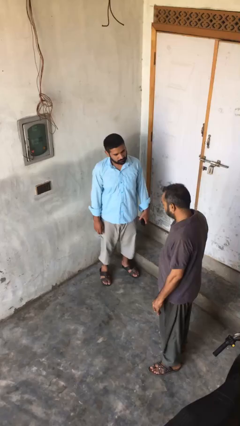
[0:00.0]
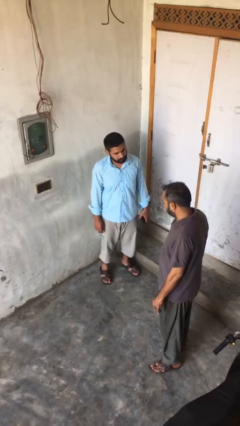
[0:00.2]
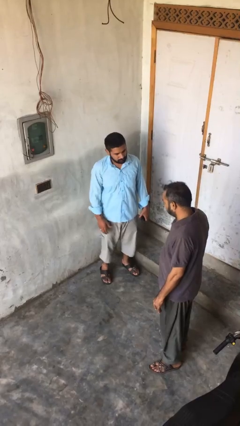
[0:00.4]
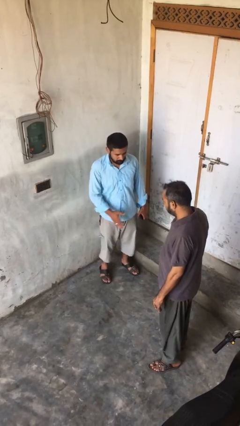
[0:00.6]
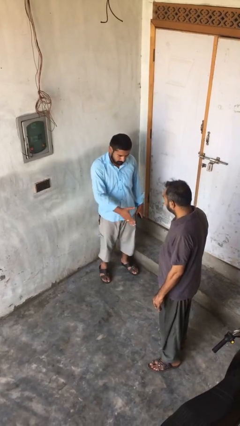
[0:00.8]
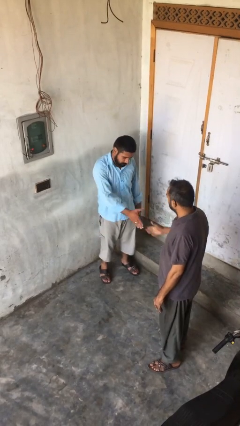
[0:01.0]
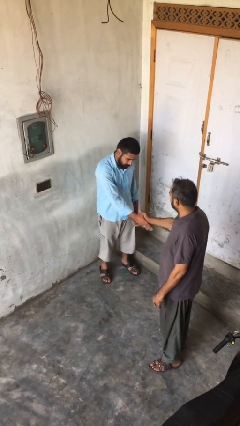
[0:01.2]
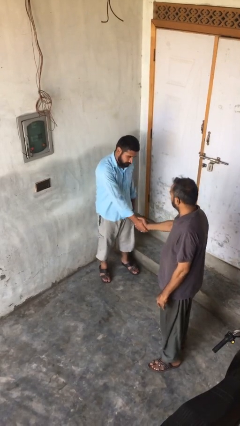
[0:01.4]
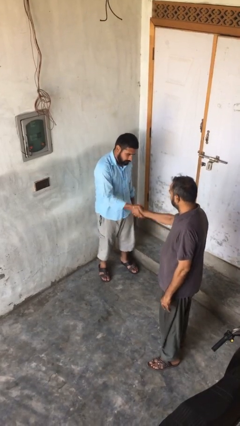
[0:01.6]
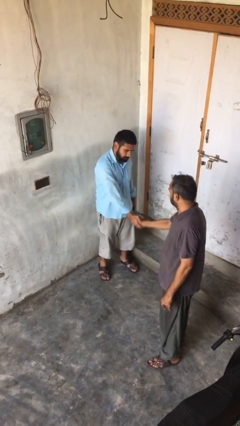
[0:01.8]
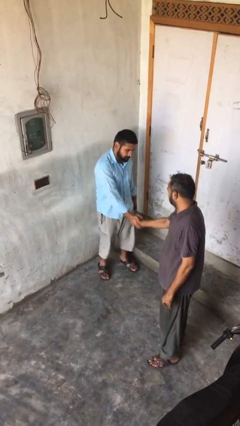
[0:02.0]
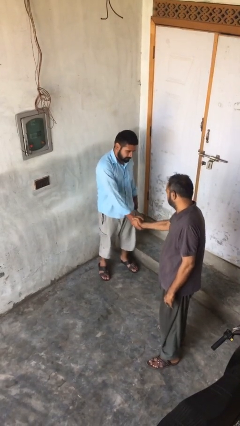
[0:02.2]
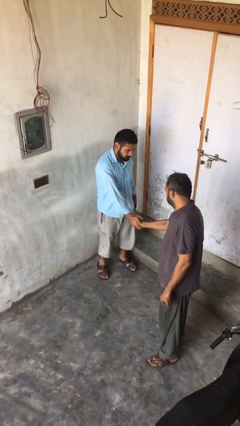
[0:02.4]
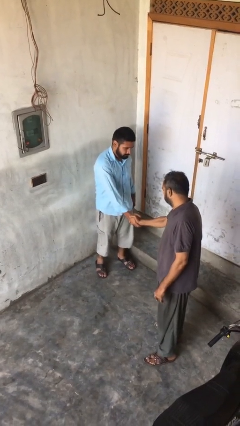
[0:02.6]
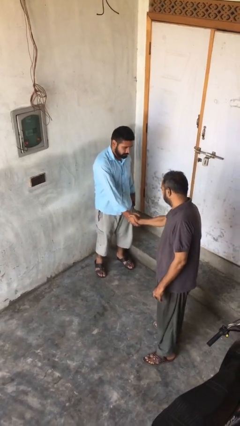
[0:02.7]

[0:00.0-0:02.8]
person shakes hand

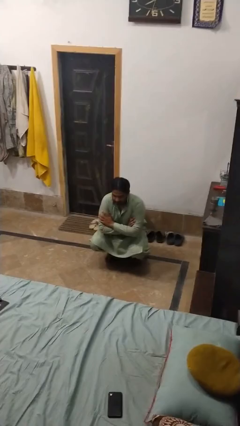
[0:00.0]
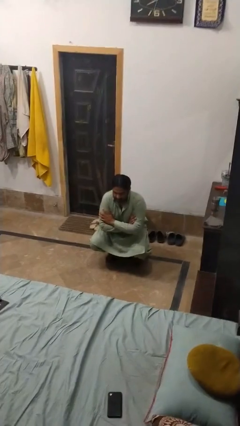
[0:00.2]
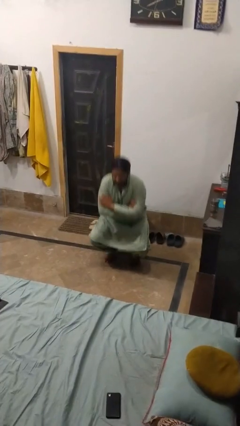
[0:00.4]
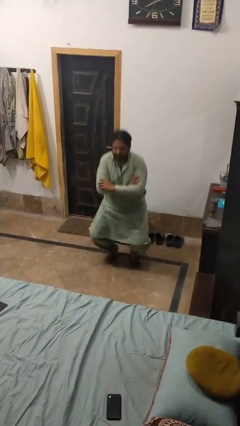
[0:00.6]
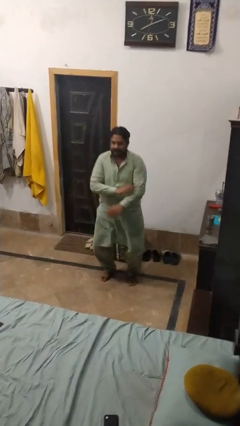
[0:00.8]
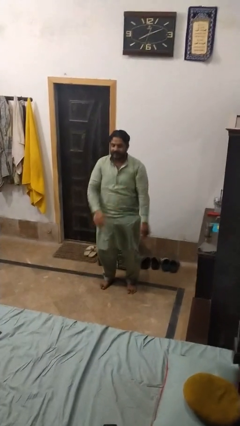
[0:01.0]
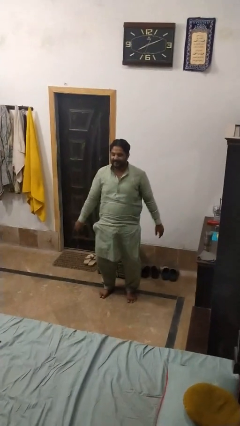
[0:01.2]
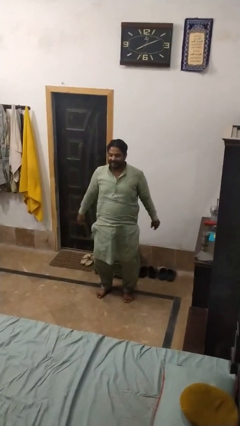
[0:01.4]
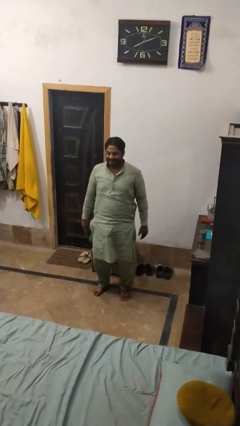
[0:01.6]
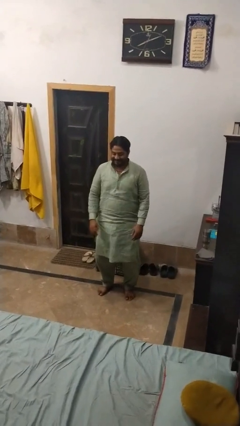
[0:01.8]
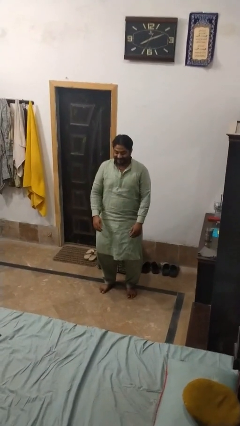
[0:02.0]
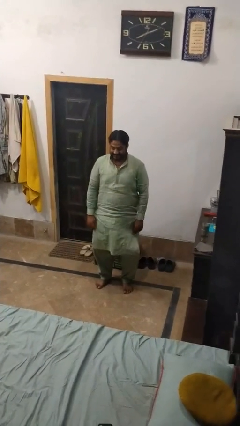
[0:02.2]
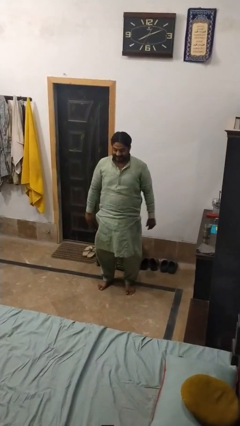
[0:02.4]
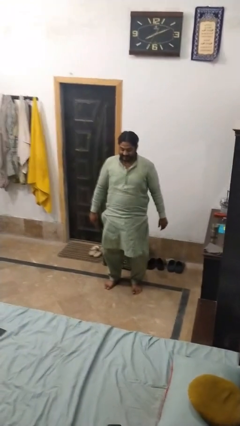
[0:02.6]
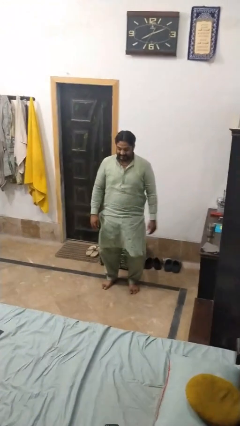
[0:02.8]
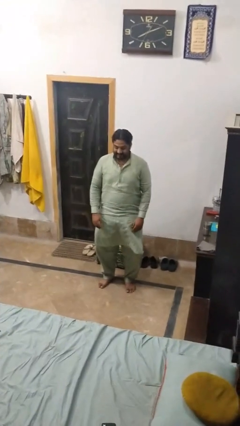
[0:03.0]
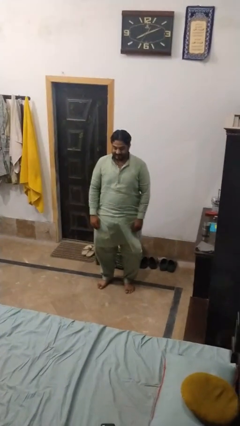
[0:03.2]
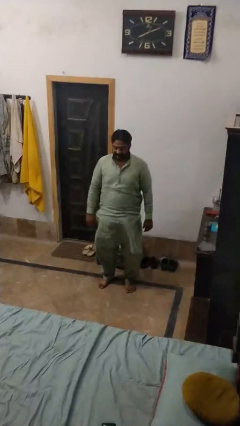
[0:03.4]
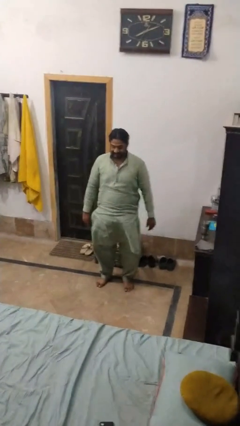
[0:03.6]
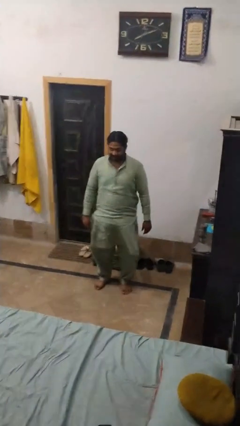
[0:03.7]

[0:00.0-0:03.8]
person stands up

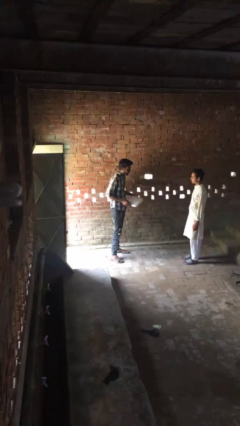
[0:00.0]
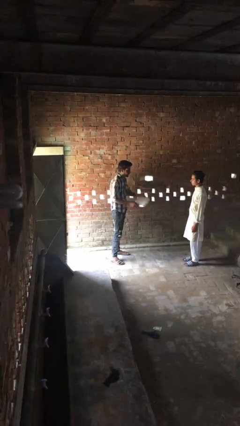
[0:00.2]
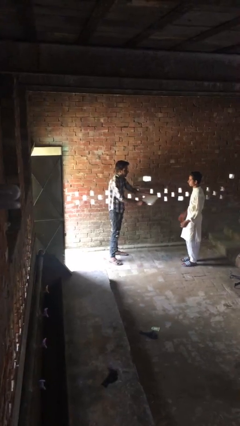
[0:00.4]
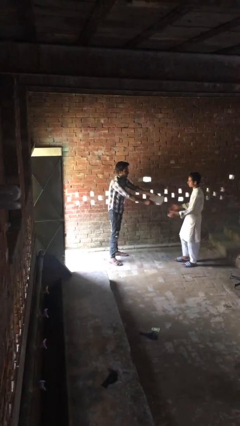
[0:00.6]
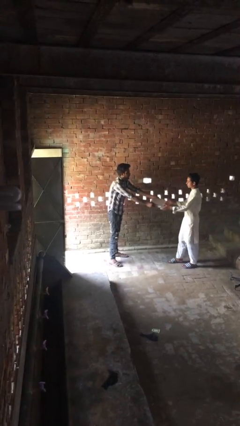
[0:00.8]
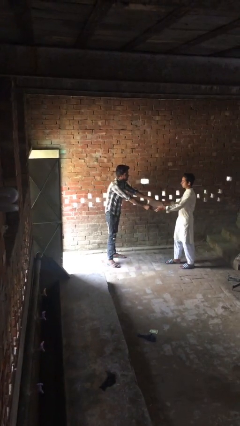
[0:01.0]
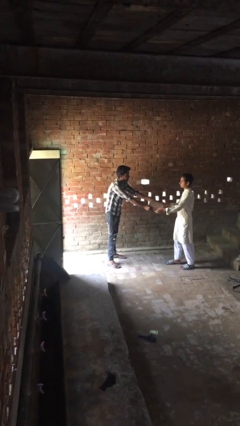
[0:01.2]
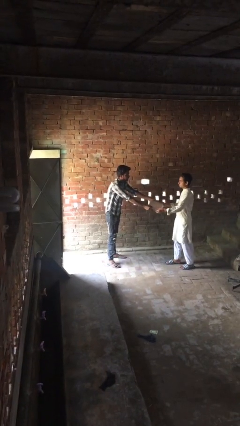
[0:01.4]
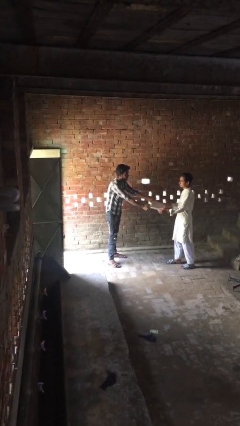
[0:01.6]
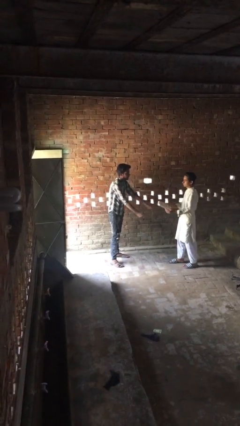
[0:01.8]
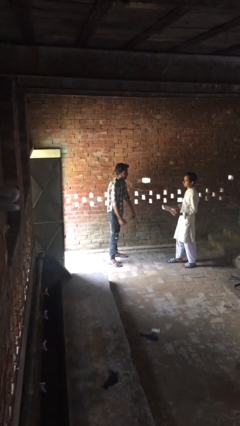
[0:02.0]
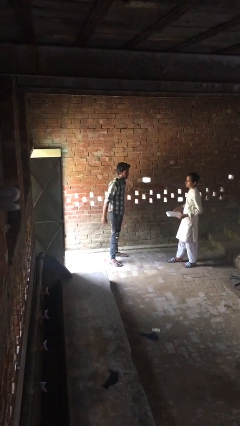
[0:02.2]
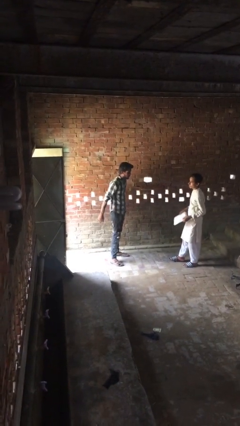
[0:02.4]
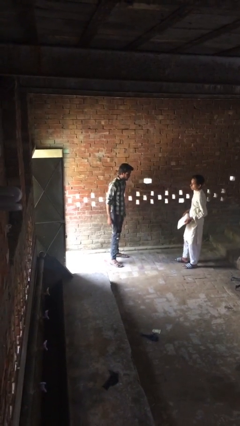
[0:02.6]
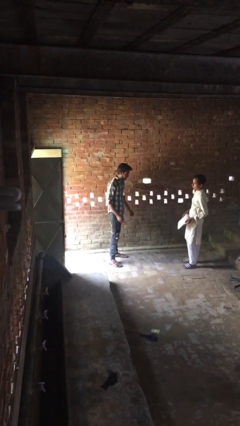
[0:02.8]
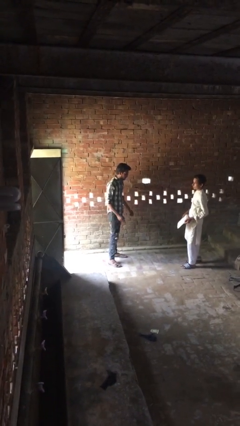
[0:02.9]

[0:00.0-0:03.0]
person transfers object to person

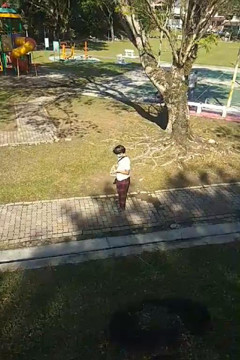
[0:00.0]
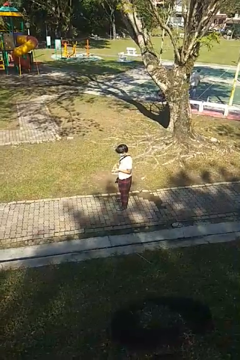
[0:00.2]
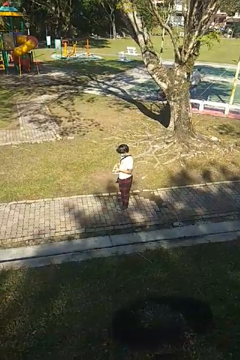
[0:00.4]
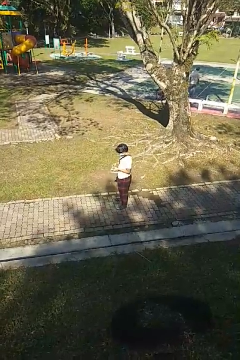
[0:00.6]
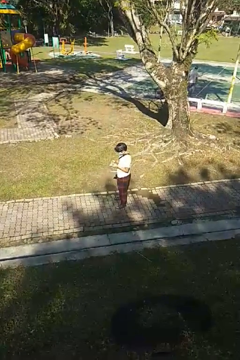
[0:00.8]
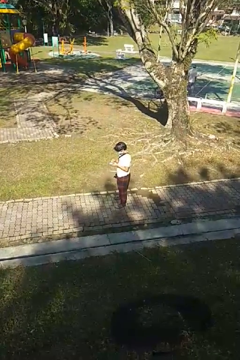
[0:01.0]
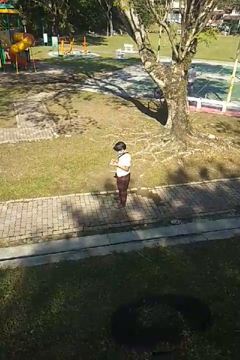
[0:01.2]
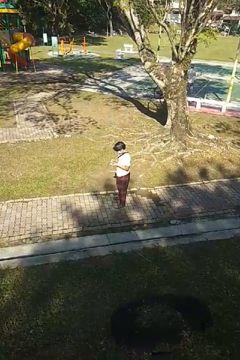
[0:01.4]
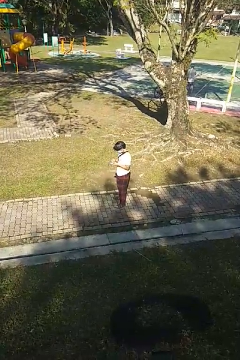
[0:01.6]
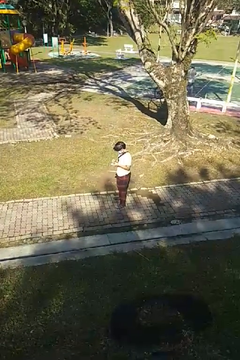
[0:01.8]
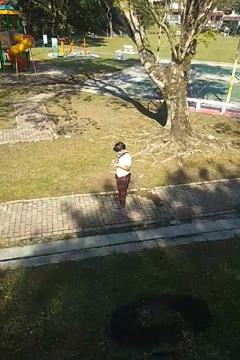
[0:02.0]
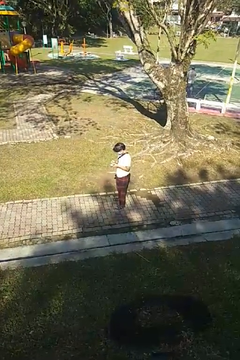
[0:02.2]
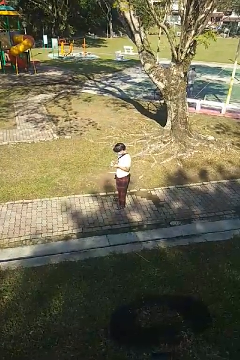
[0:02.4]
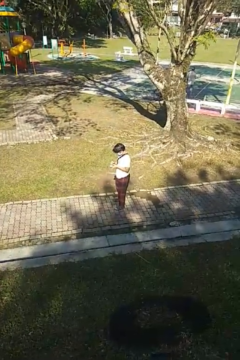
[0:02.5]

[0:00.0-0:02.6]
person searches in purse

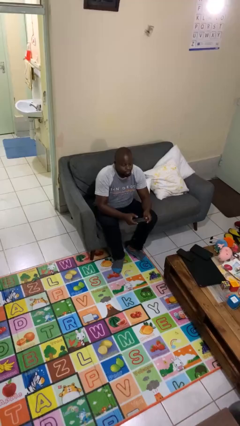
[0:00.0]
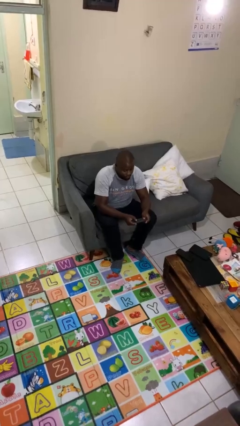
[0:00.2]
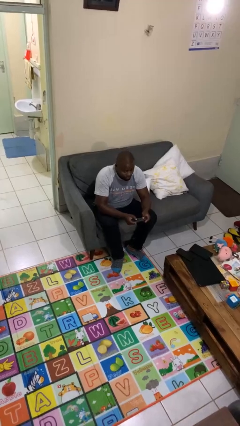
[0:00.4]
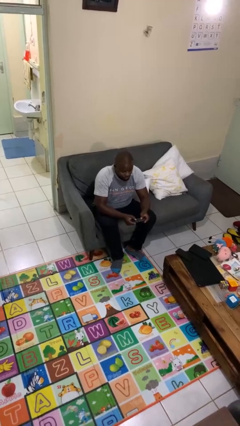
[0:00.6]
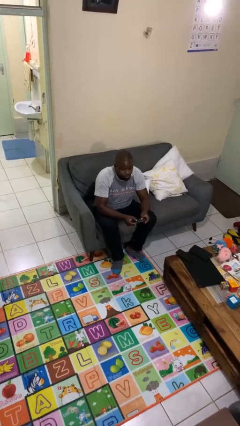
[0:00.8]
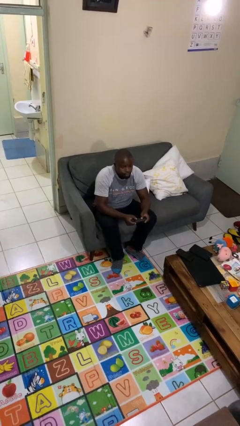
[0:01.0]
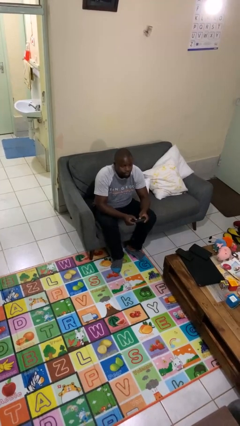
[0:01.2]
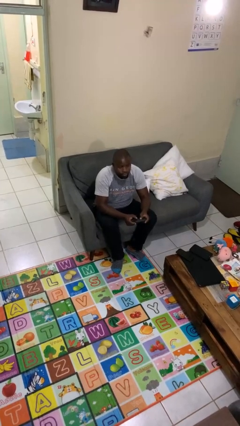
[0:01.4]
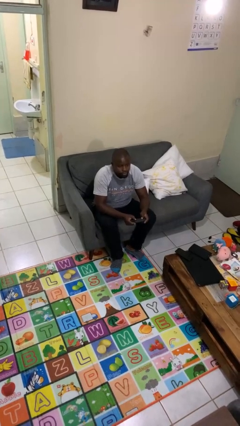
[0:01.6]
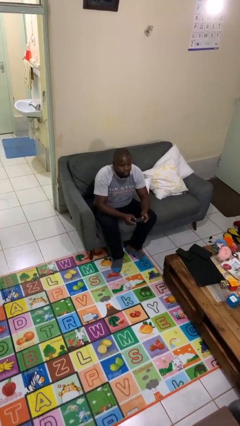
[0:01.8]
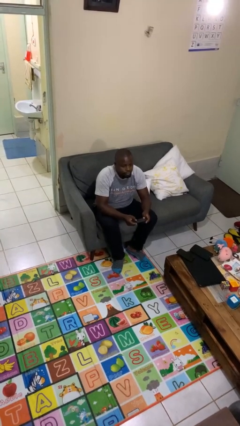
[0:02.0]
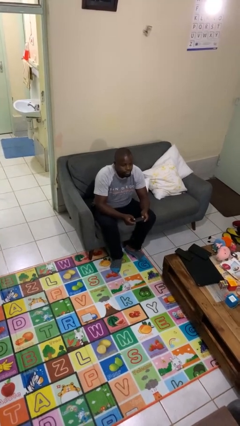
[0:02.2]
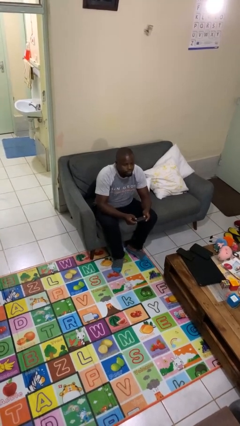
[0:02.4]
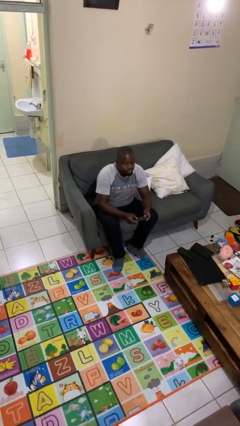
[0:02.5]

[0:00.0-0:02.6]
person interacts with handheld game

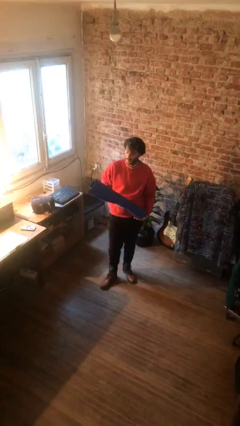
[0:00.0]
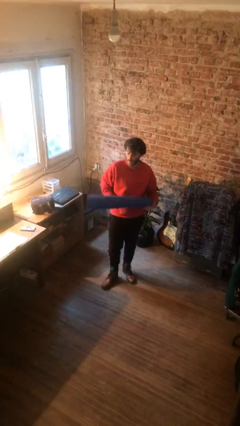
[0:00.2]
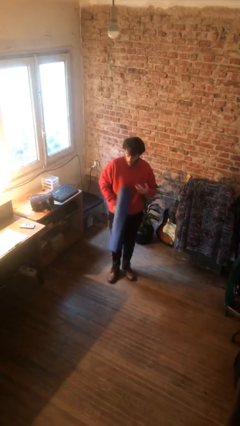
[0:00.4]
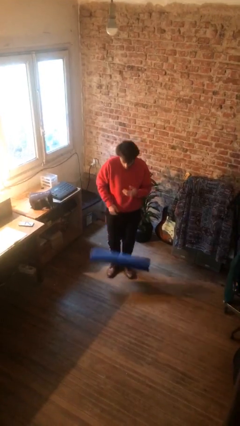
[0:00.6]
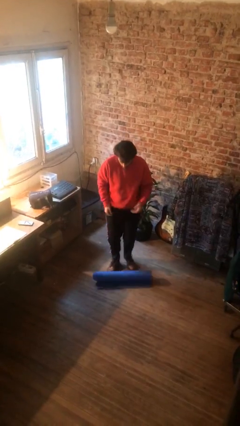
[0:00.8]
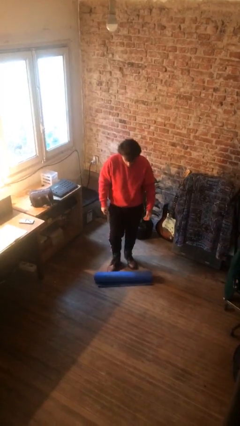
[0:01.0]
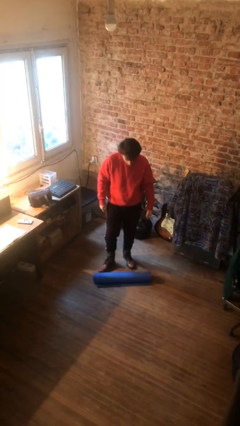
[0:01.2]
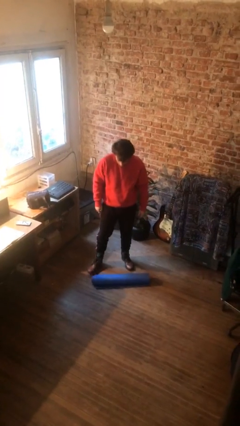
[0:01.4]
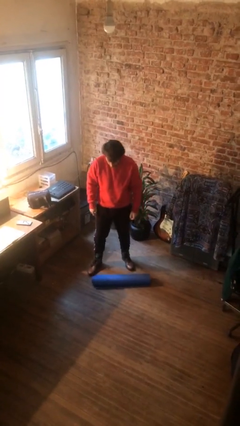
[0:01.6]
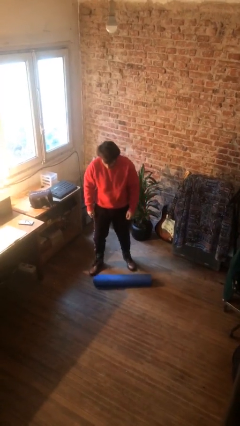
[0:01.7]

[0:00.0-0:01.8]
person drops object

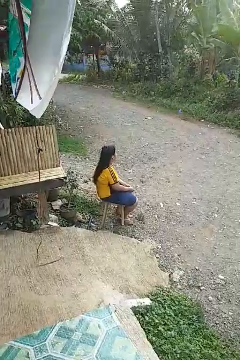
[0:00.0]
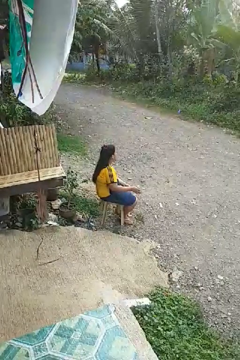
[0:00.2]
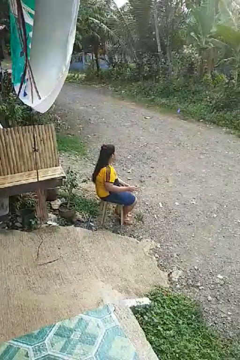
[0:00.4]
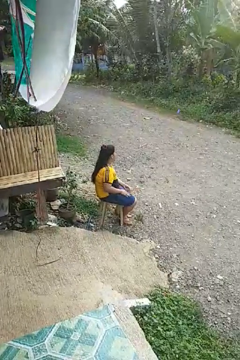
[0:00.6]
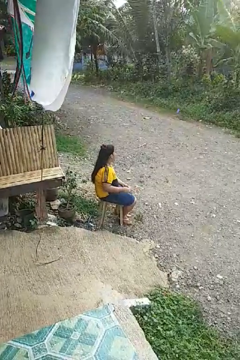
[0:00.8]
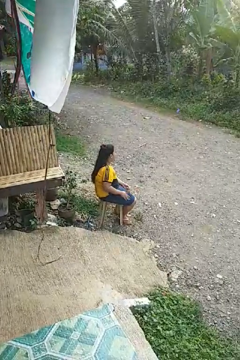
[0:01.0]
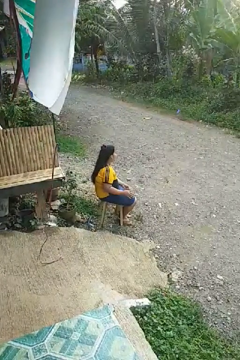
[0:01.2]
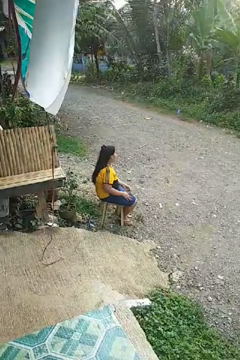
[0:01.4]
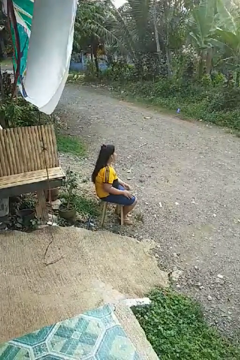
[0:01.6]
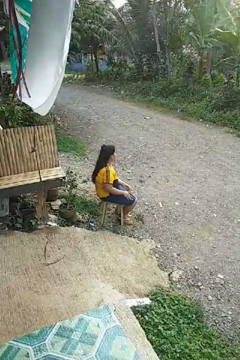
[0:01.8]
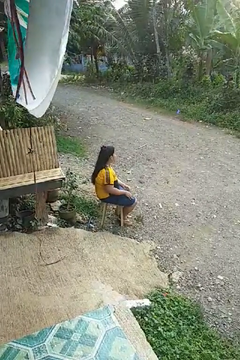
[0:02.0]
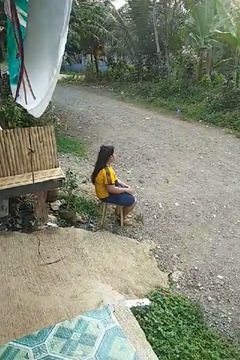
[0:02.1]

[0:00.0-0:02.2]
person slaps hands on thighs
